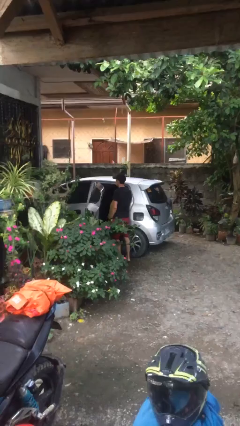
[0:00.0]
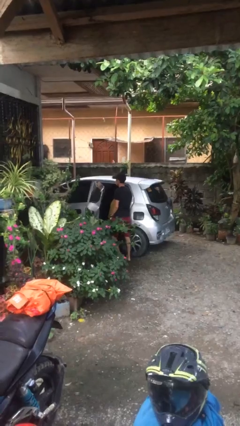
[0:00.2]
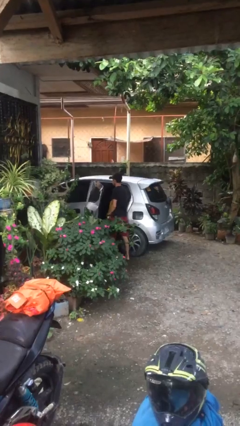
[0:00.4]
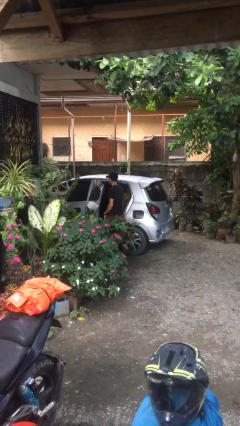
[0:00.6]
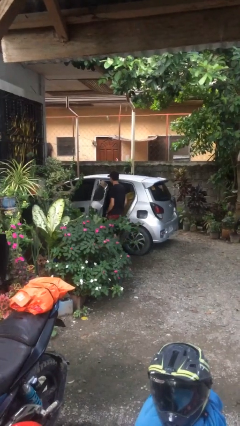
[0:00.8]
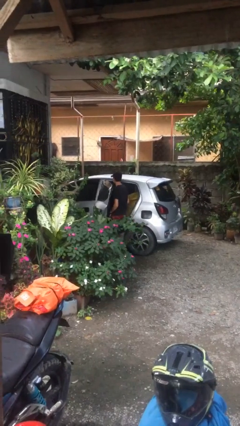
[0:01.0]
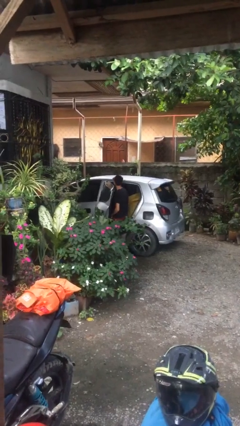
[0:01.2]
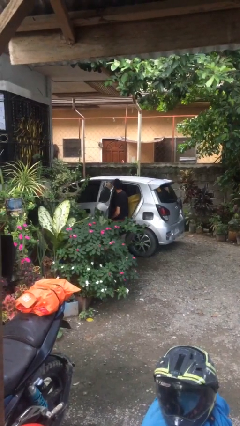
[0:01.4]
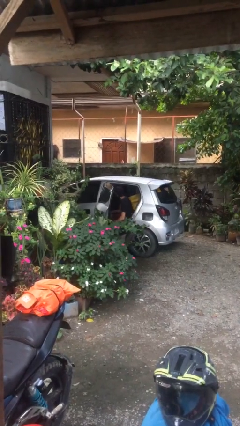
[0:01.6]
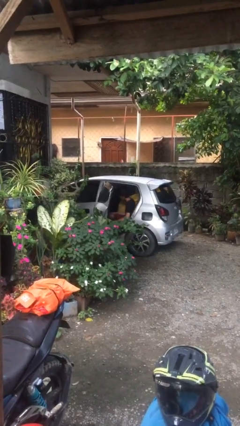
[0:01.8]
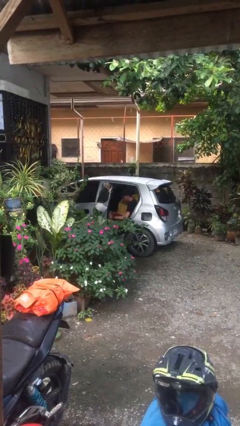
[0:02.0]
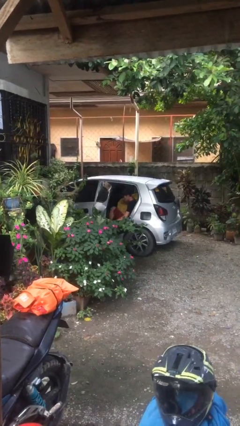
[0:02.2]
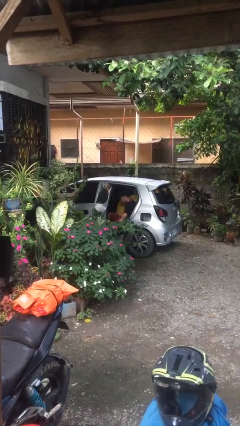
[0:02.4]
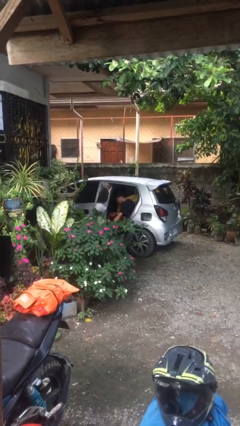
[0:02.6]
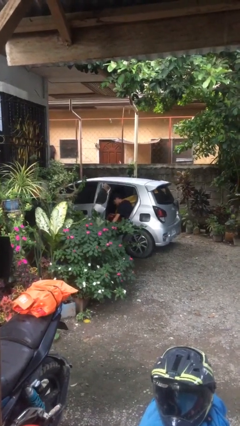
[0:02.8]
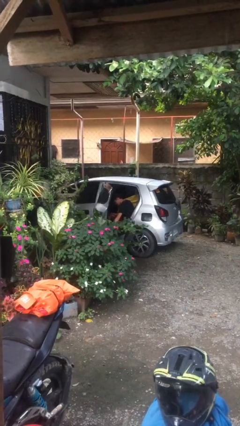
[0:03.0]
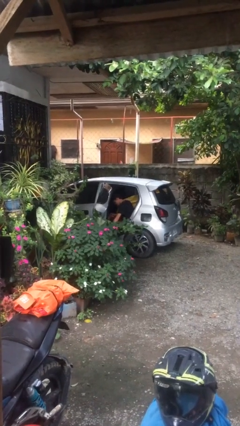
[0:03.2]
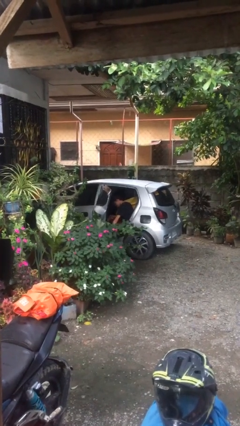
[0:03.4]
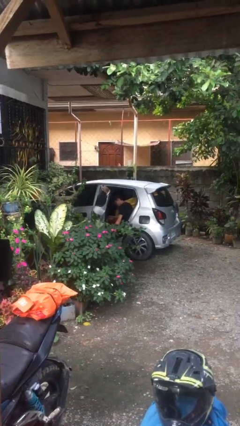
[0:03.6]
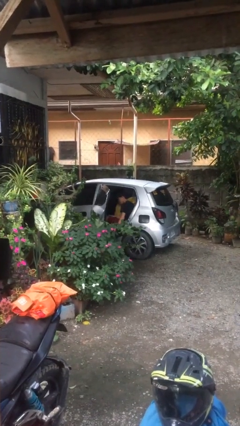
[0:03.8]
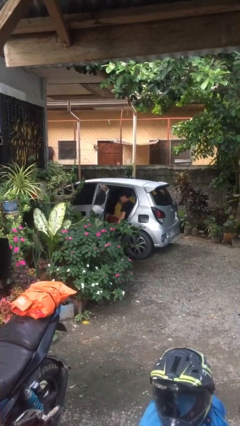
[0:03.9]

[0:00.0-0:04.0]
person enters car

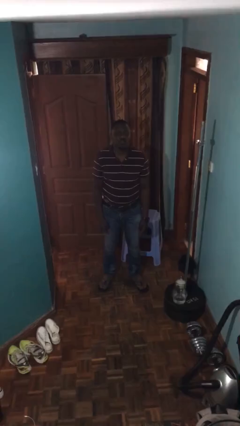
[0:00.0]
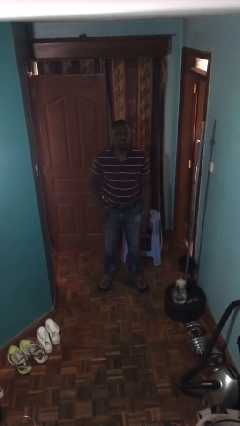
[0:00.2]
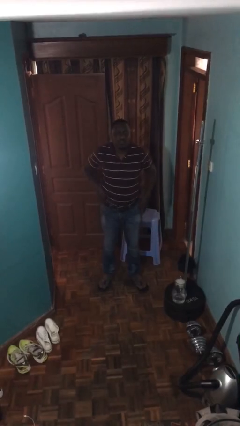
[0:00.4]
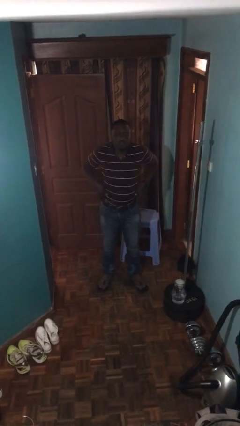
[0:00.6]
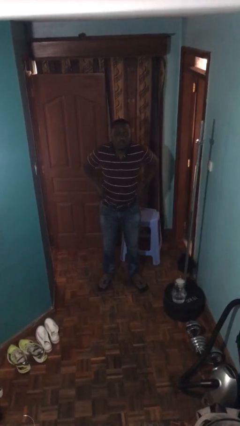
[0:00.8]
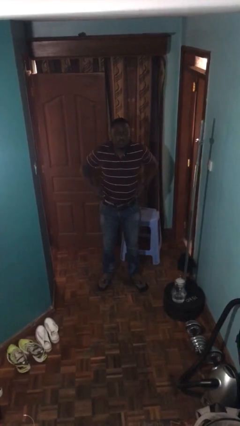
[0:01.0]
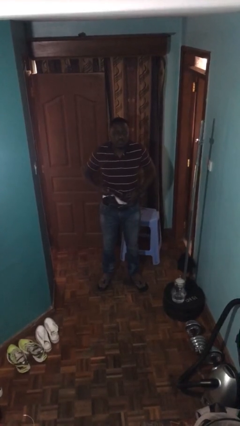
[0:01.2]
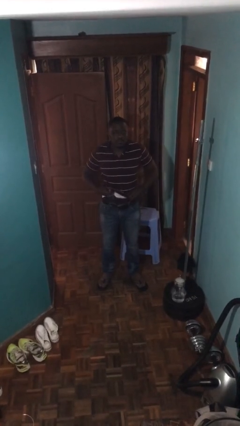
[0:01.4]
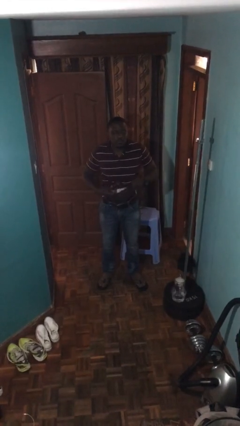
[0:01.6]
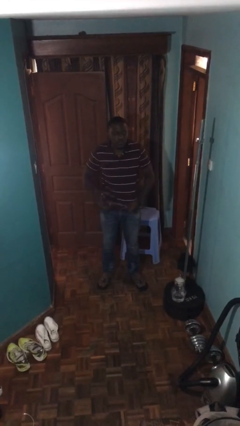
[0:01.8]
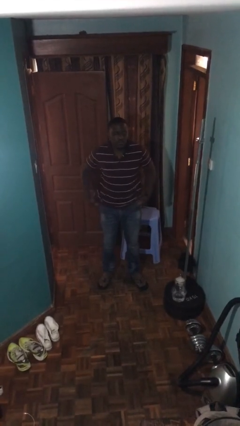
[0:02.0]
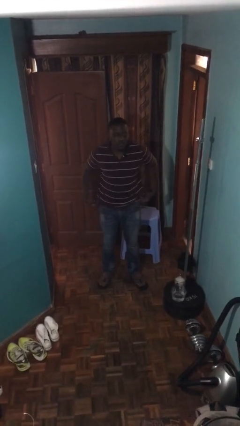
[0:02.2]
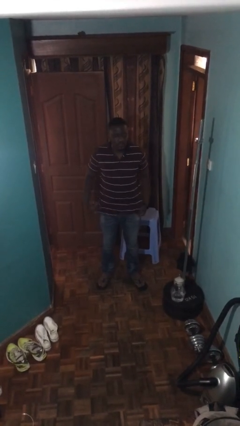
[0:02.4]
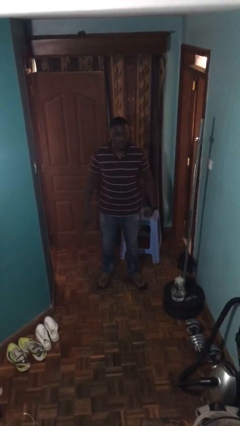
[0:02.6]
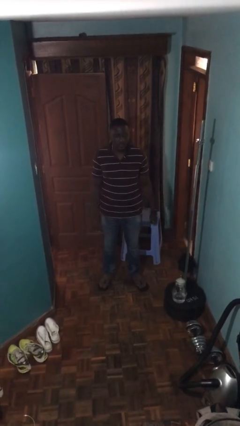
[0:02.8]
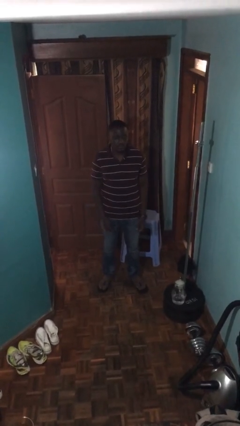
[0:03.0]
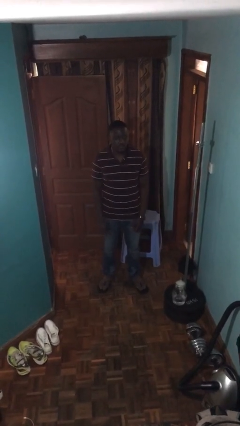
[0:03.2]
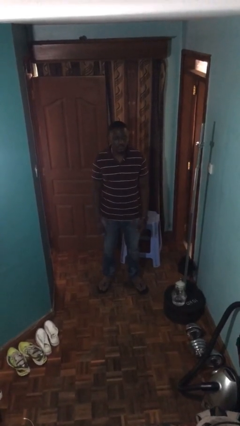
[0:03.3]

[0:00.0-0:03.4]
person untucks shirt

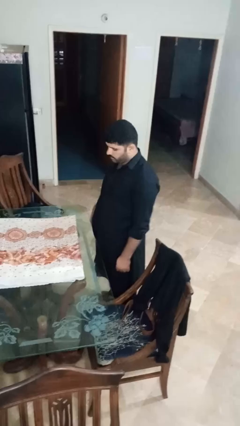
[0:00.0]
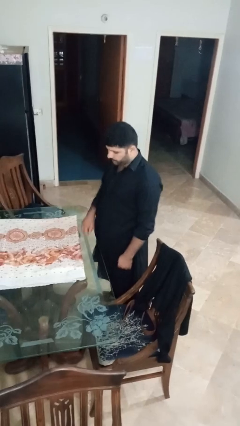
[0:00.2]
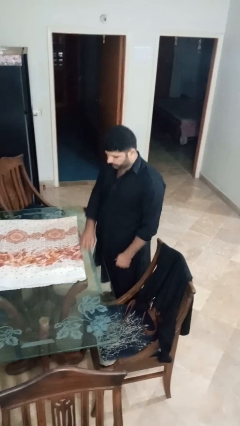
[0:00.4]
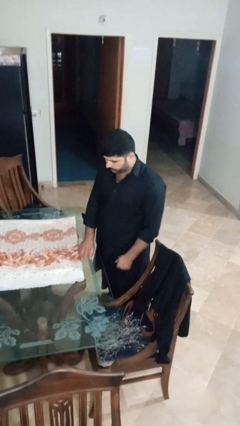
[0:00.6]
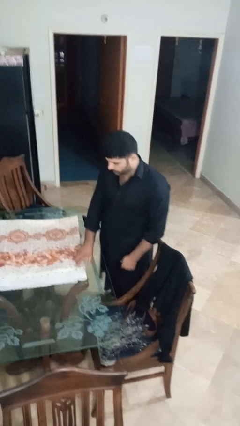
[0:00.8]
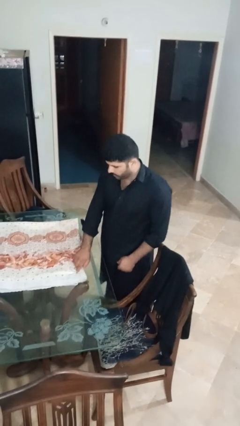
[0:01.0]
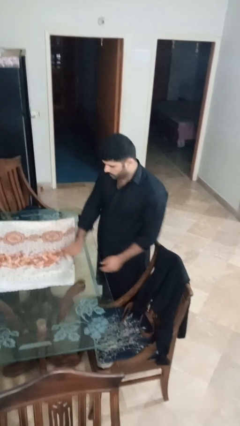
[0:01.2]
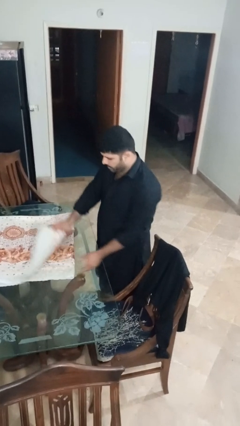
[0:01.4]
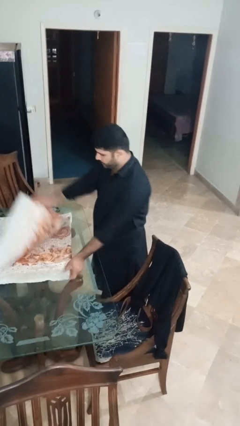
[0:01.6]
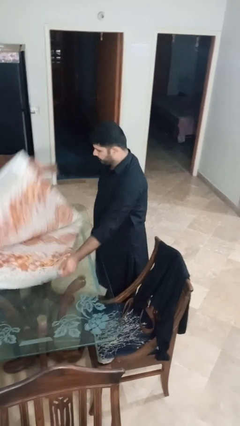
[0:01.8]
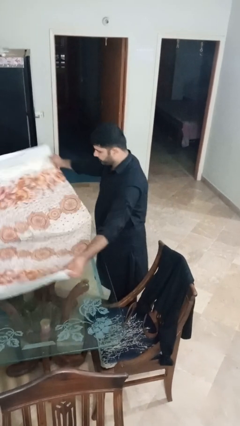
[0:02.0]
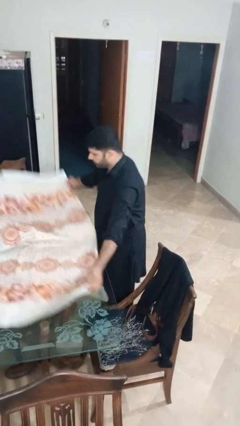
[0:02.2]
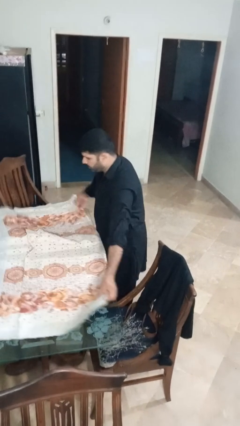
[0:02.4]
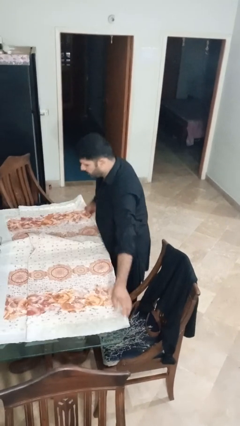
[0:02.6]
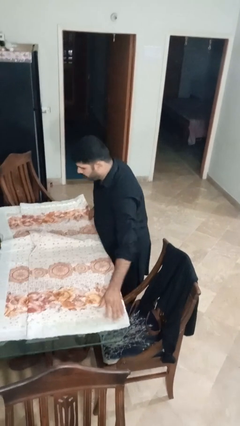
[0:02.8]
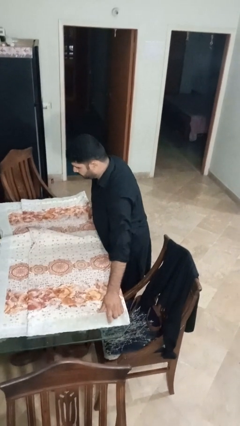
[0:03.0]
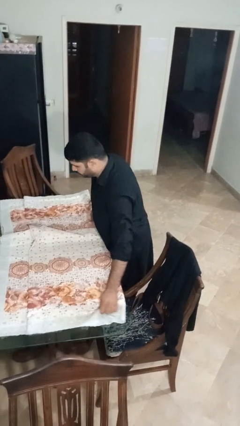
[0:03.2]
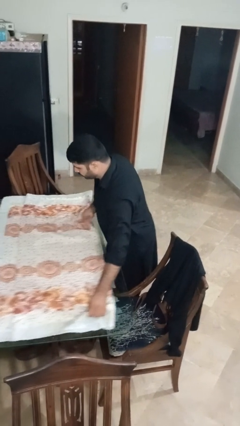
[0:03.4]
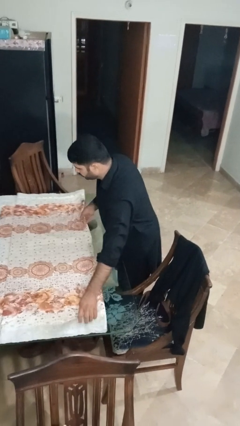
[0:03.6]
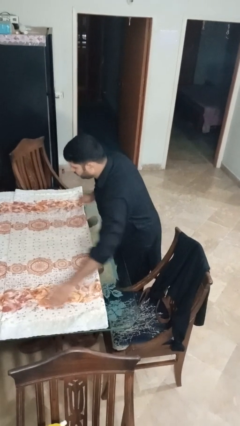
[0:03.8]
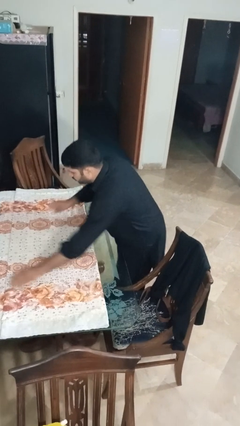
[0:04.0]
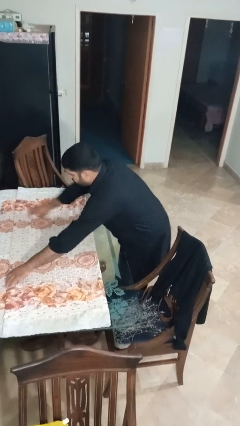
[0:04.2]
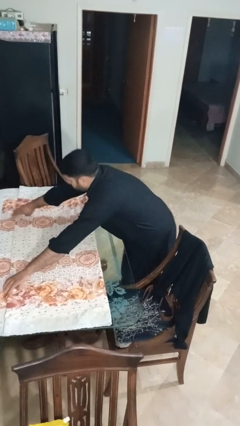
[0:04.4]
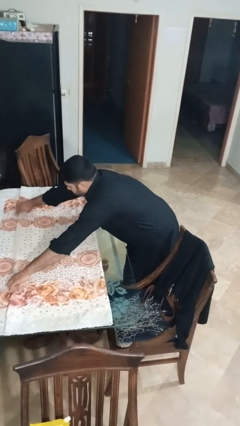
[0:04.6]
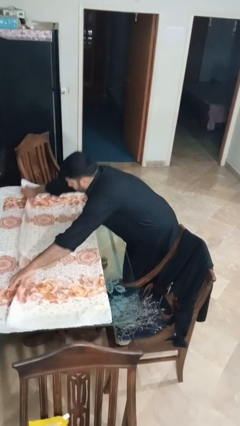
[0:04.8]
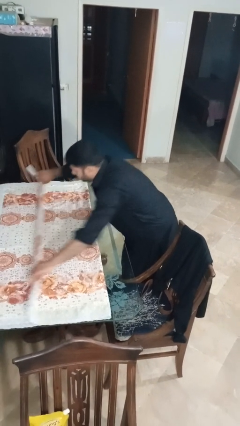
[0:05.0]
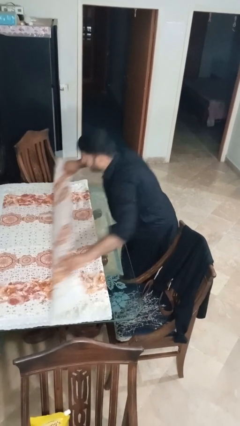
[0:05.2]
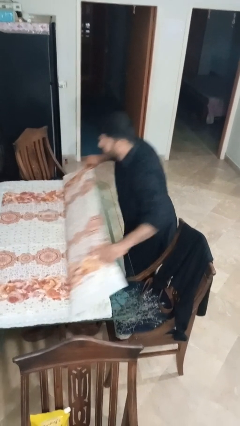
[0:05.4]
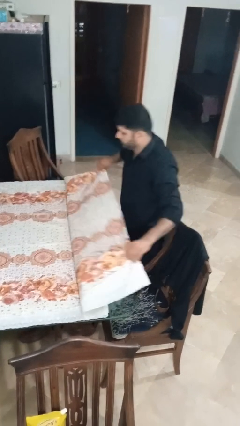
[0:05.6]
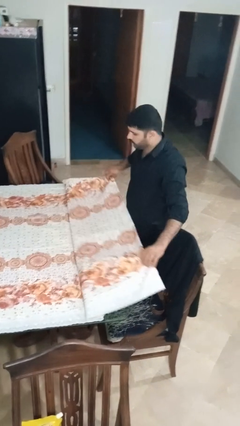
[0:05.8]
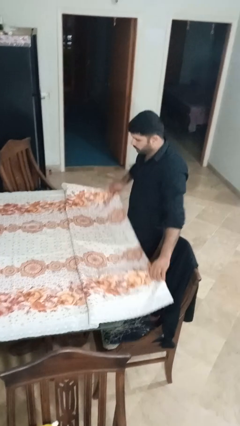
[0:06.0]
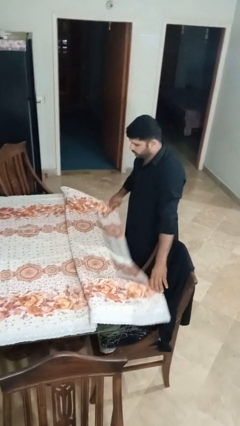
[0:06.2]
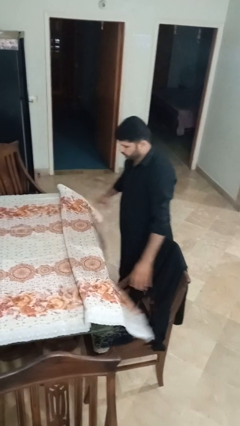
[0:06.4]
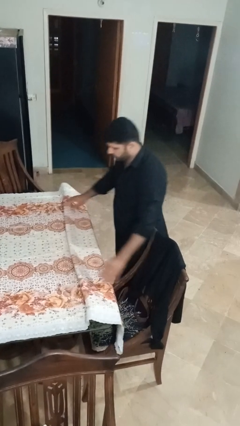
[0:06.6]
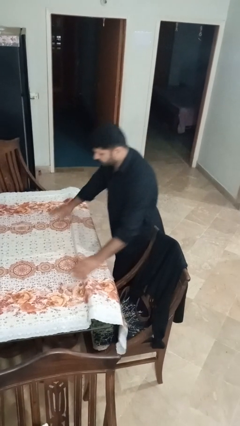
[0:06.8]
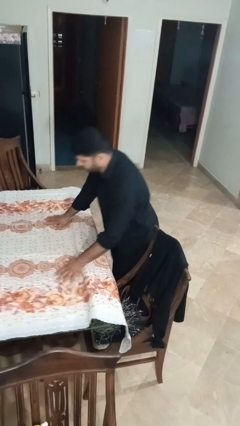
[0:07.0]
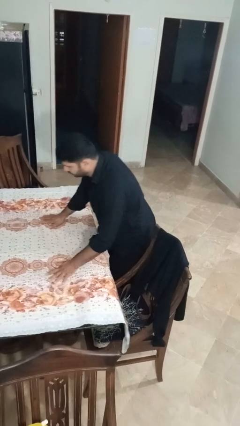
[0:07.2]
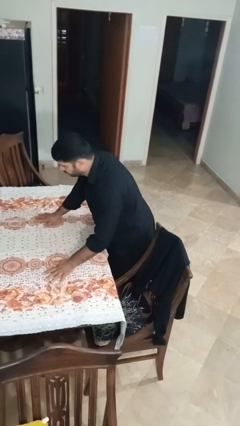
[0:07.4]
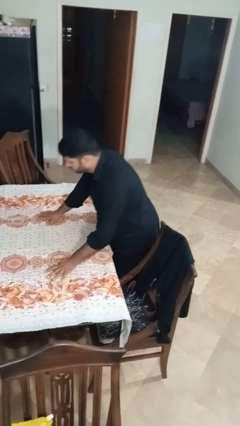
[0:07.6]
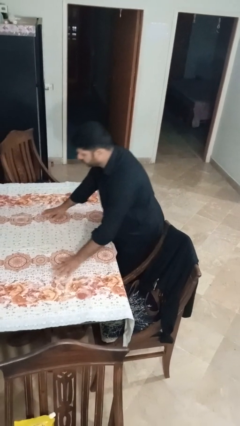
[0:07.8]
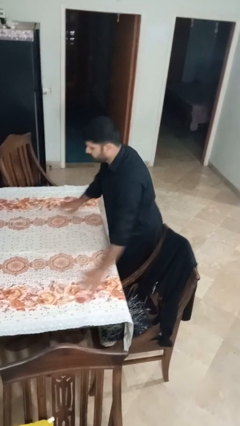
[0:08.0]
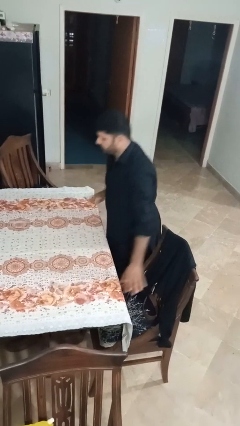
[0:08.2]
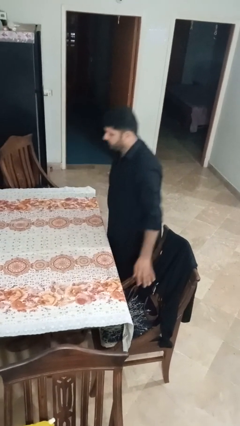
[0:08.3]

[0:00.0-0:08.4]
person spreads tablecloth

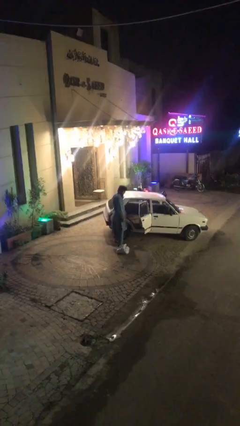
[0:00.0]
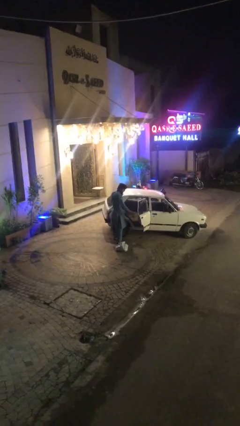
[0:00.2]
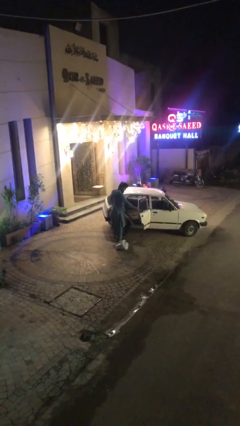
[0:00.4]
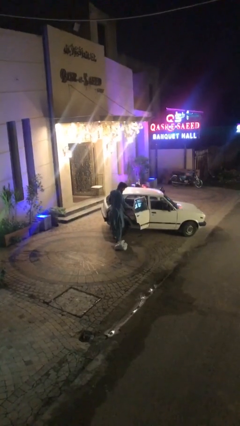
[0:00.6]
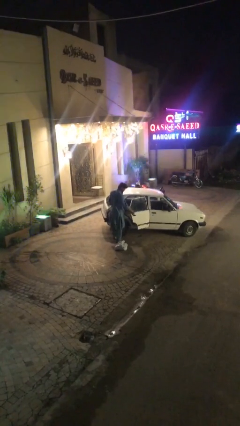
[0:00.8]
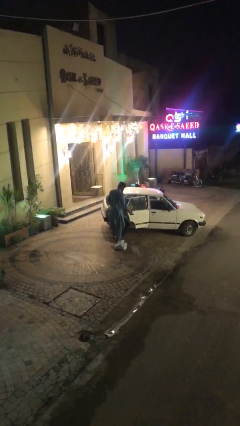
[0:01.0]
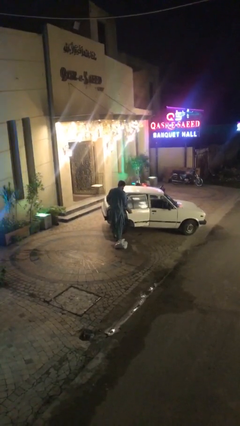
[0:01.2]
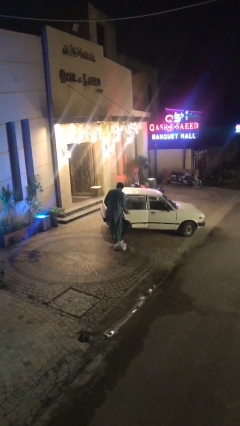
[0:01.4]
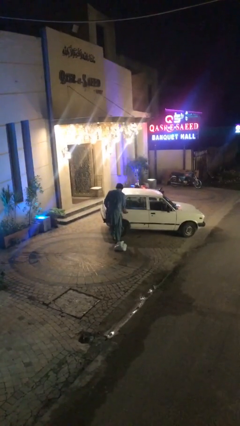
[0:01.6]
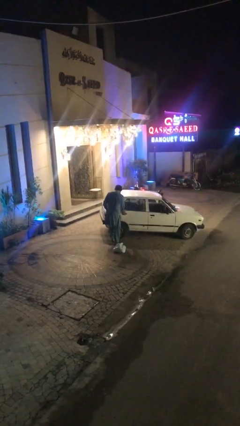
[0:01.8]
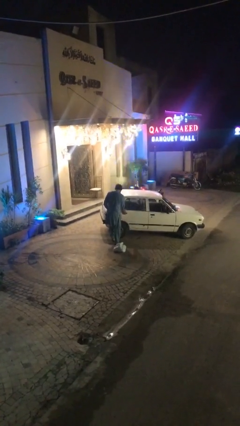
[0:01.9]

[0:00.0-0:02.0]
person closes car door
